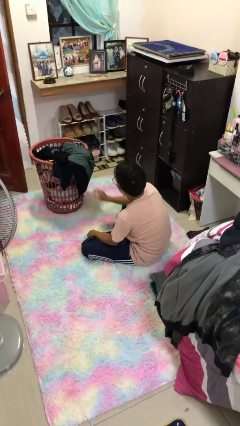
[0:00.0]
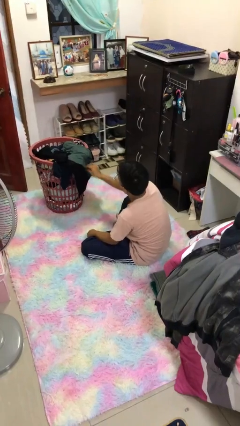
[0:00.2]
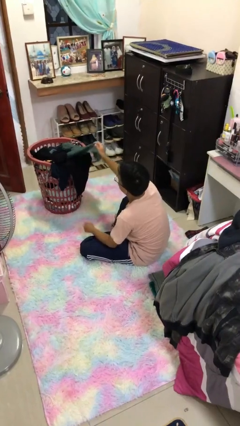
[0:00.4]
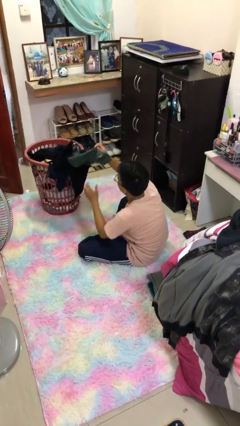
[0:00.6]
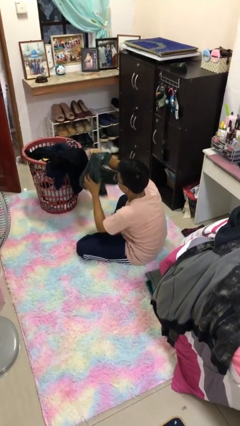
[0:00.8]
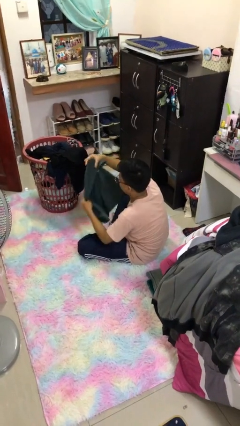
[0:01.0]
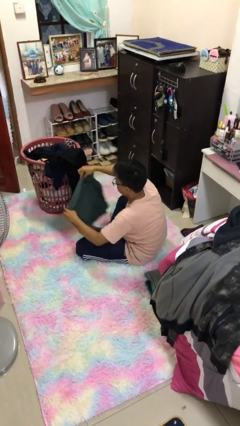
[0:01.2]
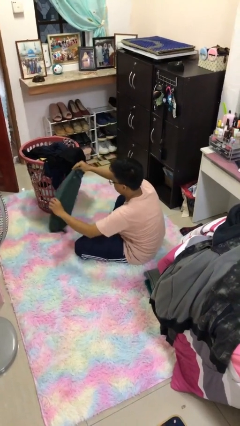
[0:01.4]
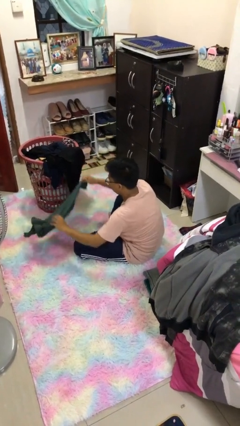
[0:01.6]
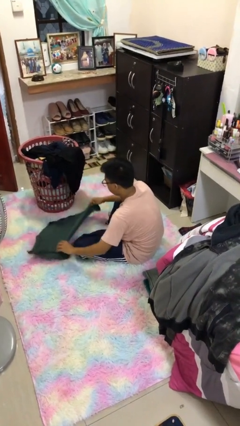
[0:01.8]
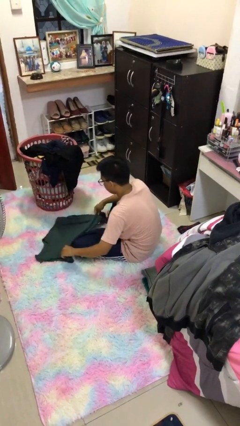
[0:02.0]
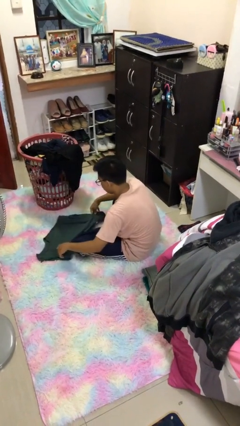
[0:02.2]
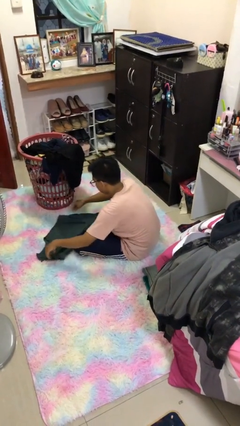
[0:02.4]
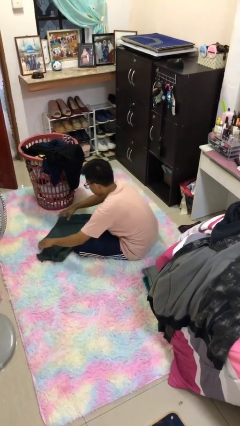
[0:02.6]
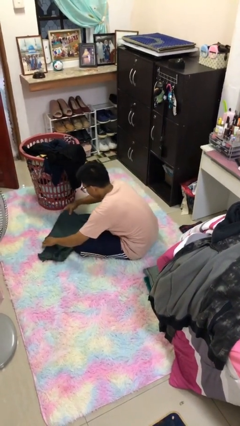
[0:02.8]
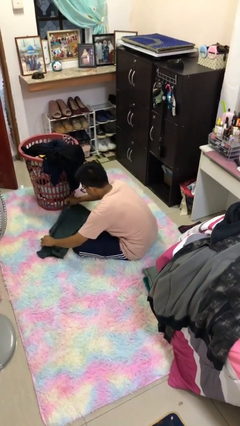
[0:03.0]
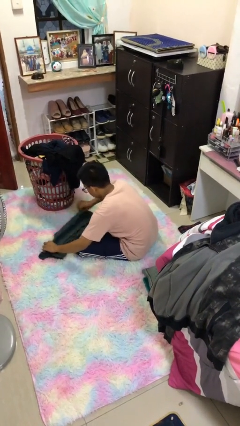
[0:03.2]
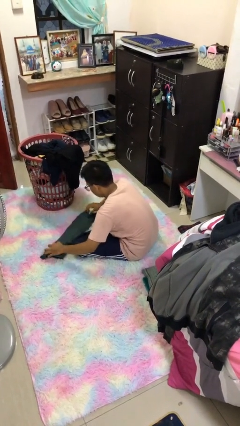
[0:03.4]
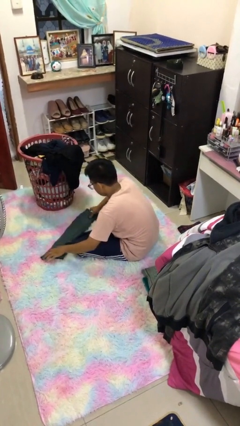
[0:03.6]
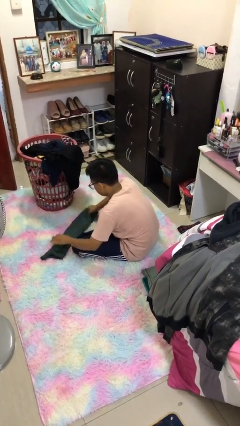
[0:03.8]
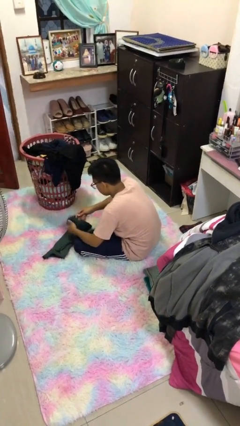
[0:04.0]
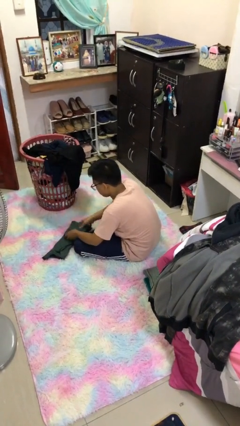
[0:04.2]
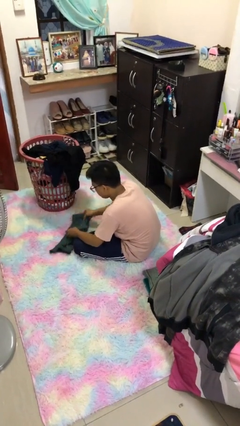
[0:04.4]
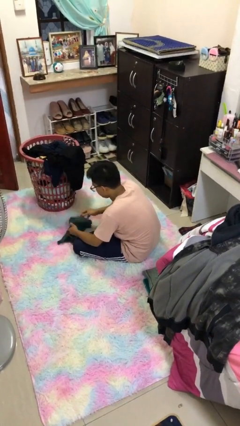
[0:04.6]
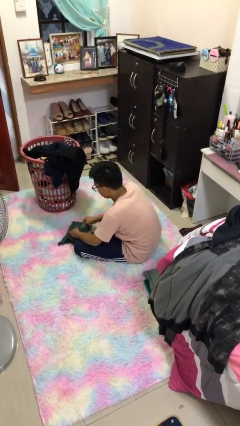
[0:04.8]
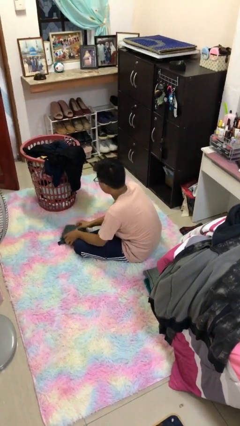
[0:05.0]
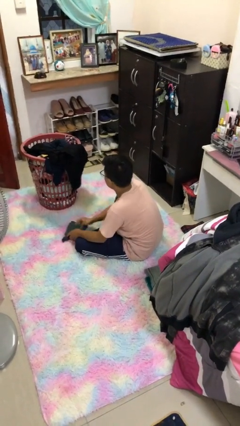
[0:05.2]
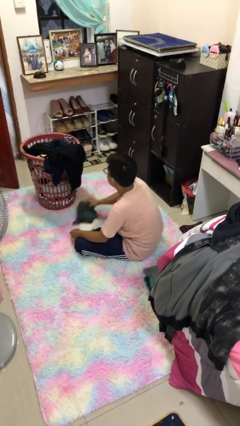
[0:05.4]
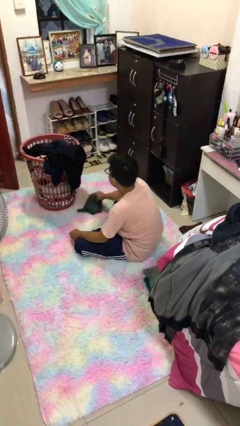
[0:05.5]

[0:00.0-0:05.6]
person folds shirt

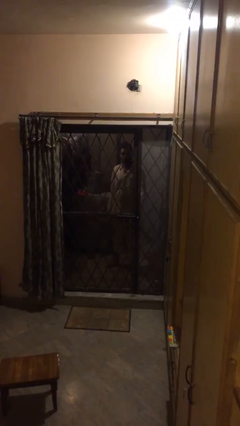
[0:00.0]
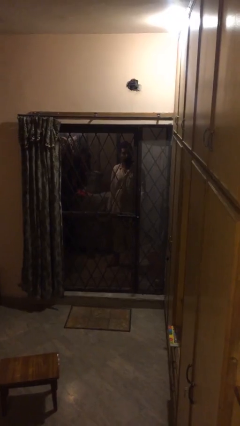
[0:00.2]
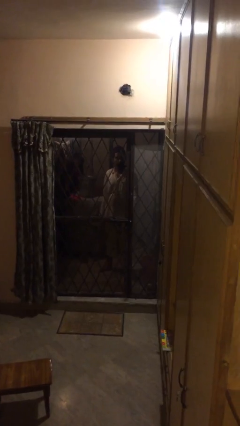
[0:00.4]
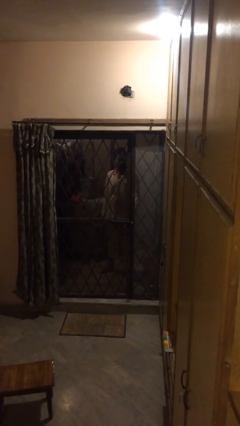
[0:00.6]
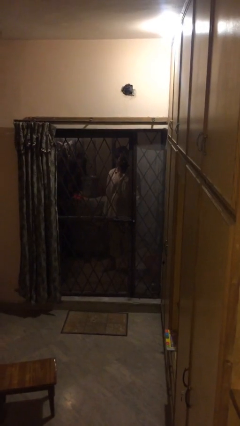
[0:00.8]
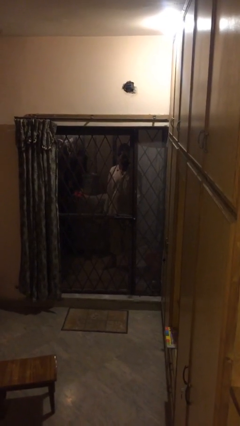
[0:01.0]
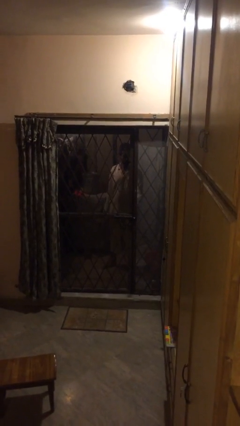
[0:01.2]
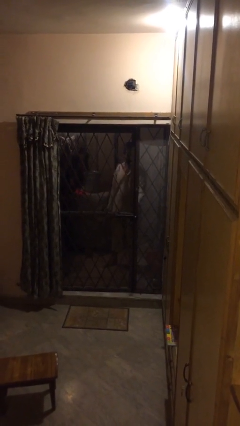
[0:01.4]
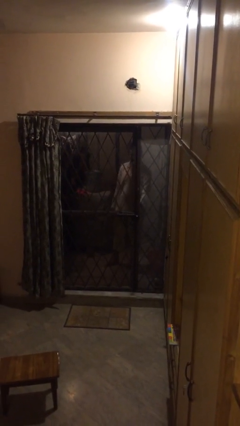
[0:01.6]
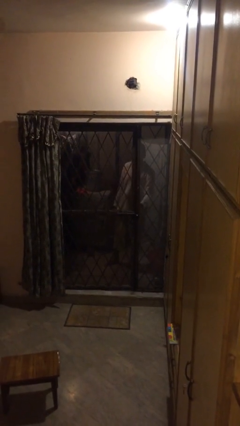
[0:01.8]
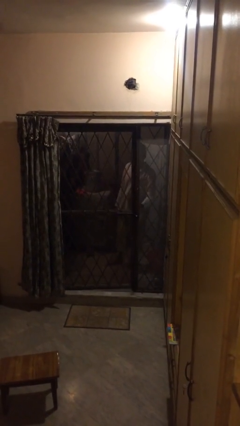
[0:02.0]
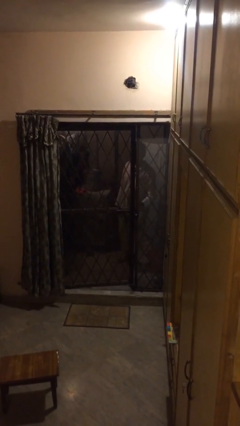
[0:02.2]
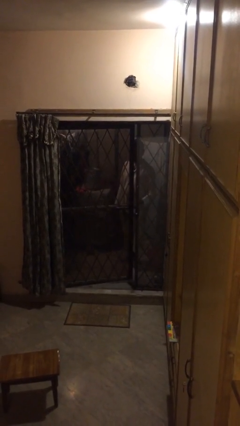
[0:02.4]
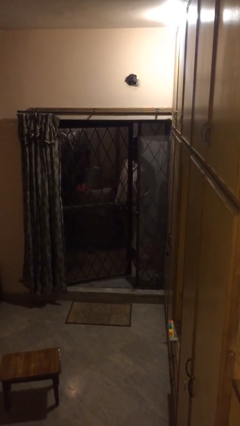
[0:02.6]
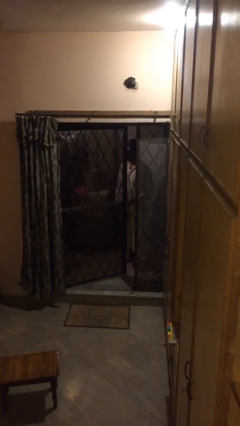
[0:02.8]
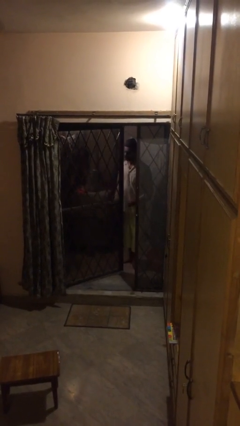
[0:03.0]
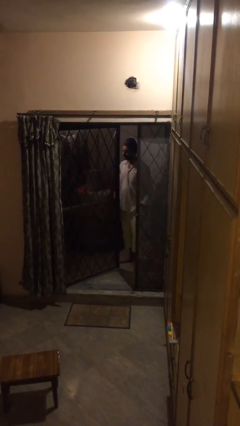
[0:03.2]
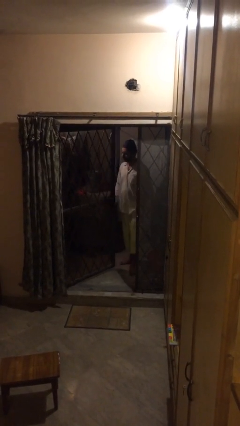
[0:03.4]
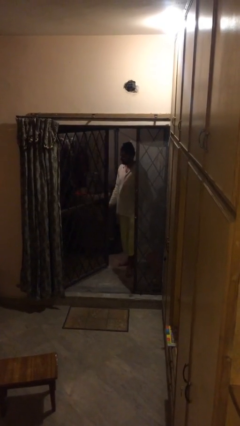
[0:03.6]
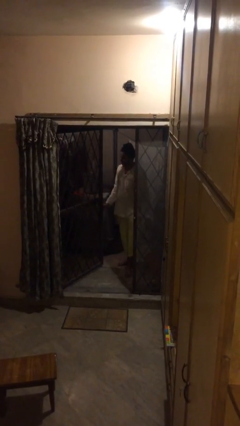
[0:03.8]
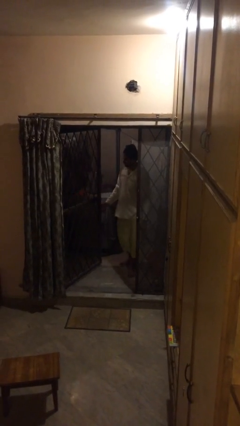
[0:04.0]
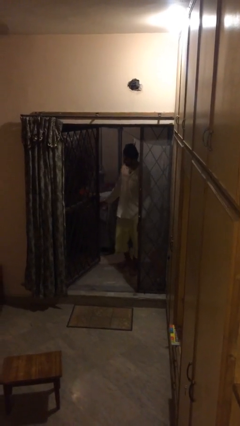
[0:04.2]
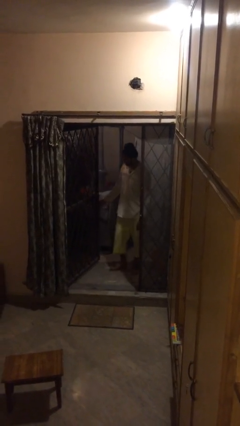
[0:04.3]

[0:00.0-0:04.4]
person opens facility door

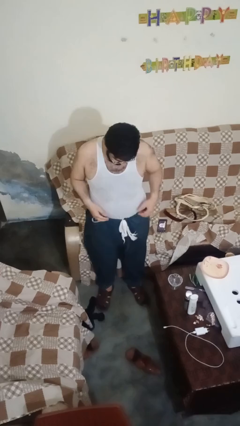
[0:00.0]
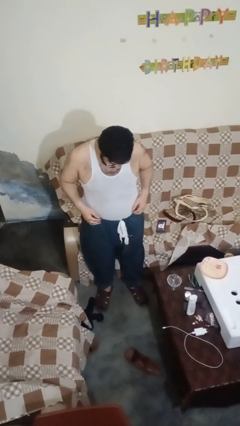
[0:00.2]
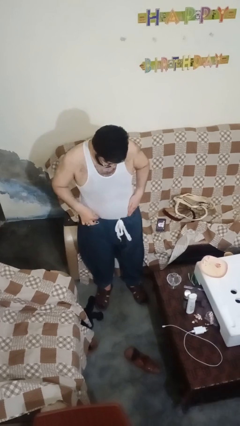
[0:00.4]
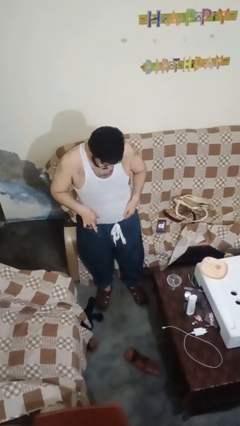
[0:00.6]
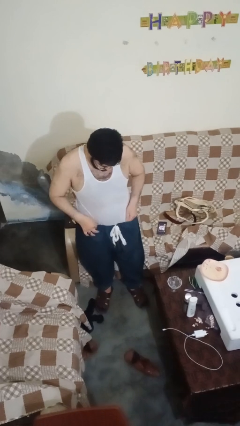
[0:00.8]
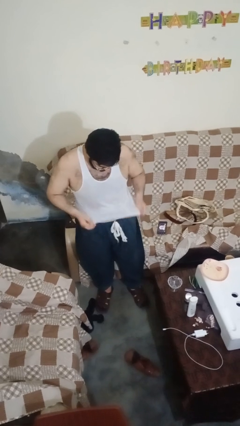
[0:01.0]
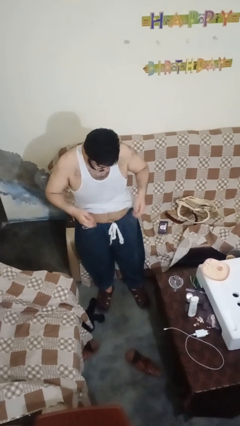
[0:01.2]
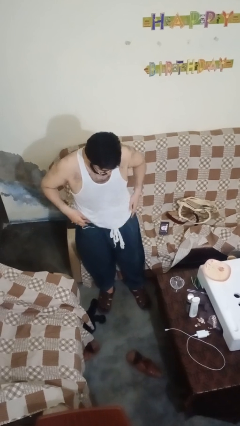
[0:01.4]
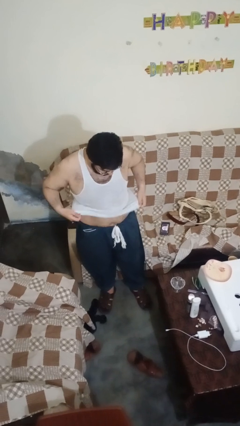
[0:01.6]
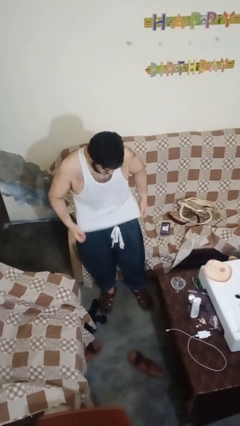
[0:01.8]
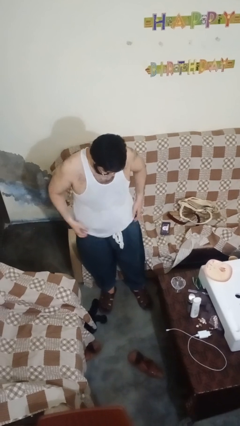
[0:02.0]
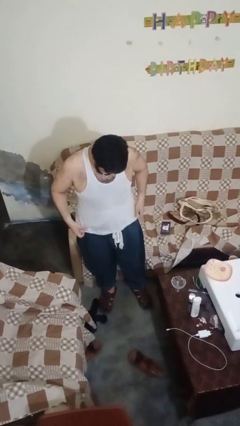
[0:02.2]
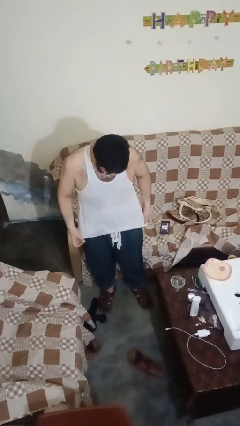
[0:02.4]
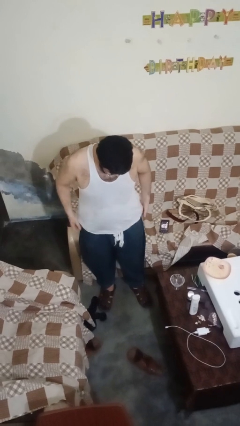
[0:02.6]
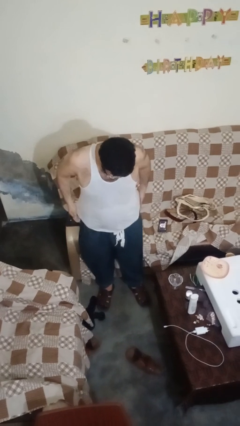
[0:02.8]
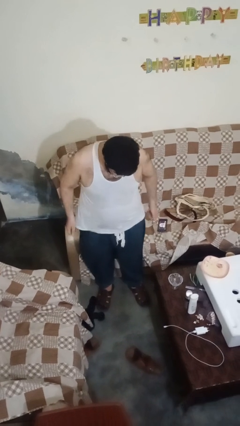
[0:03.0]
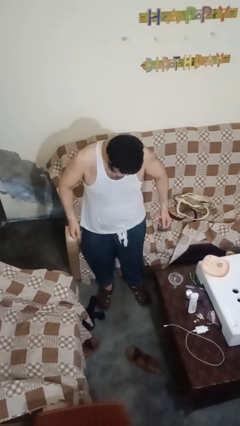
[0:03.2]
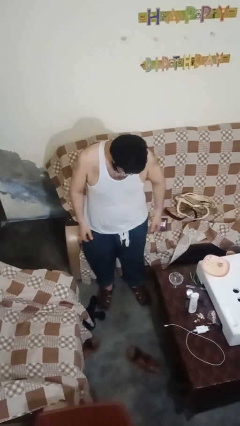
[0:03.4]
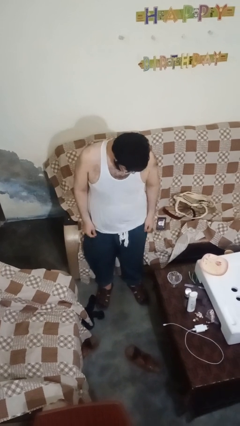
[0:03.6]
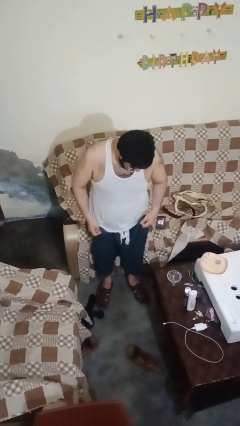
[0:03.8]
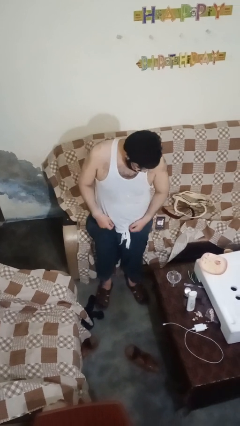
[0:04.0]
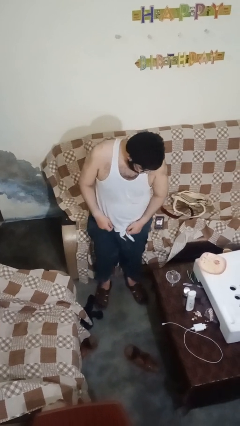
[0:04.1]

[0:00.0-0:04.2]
person untucks shirt

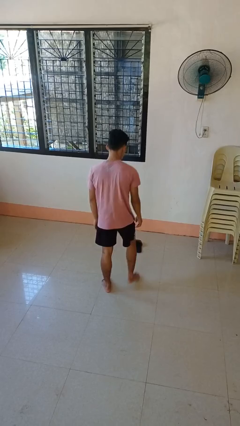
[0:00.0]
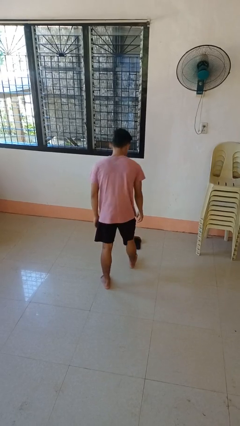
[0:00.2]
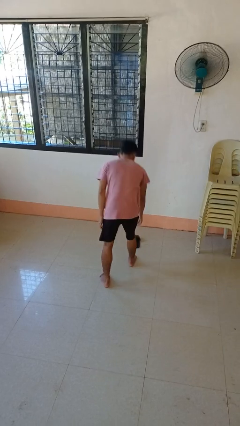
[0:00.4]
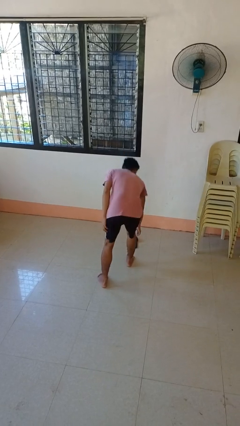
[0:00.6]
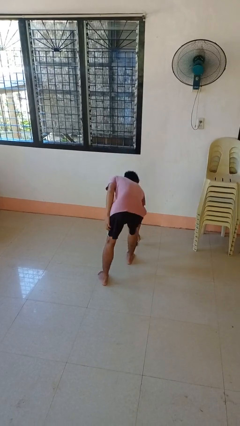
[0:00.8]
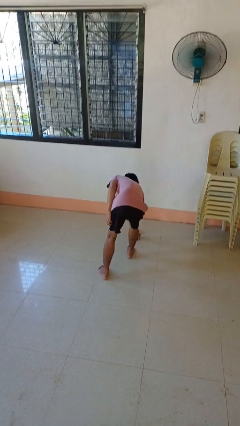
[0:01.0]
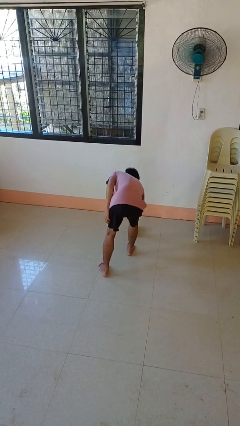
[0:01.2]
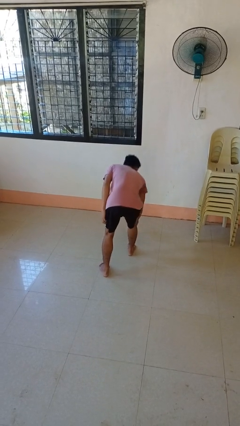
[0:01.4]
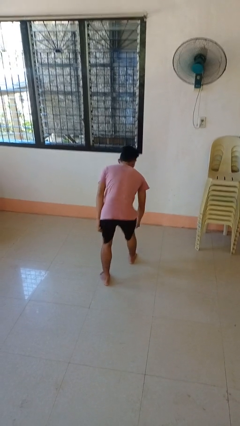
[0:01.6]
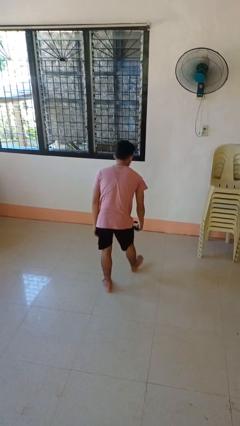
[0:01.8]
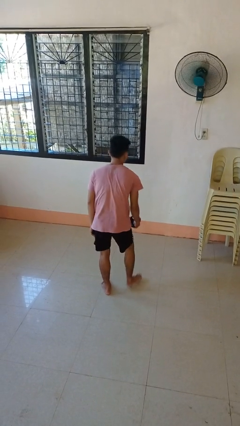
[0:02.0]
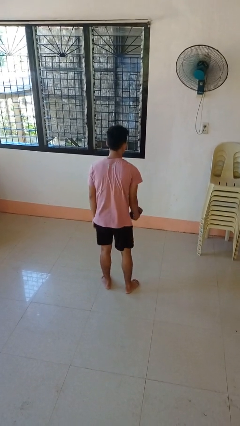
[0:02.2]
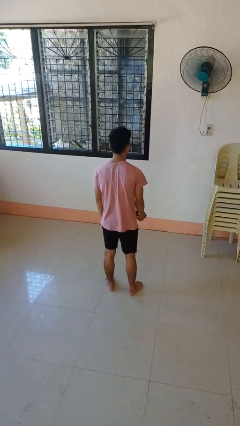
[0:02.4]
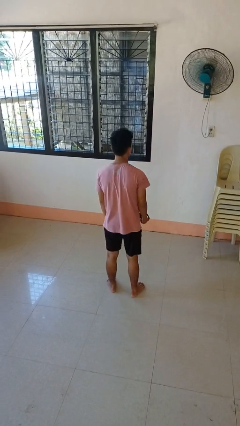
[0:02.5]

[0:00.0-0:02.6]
person picks up object from floor

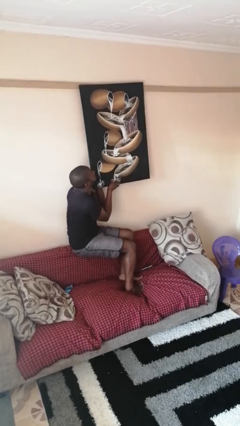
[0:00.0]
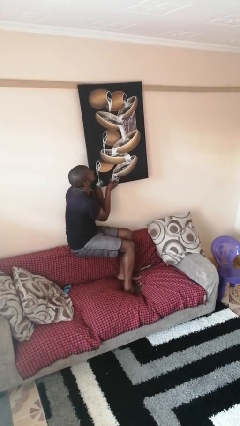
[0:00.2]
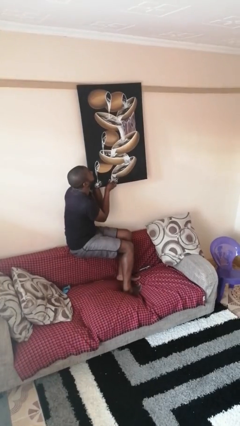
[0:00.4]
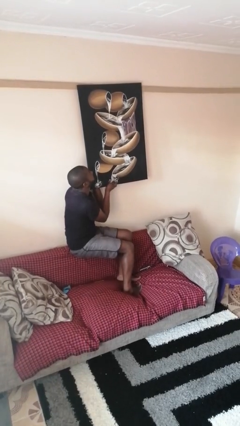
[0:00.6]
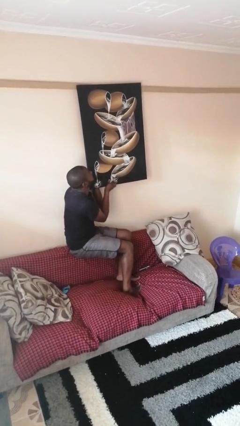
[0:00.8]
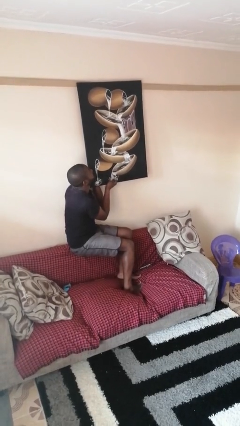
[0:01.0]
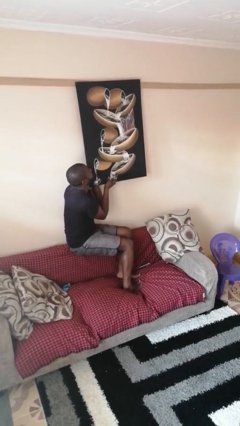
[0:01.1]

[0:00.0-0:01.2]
person puts up picture frame
